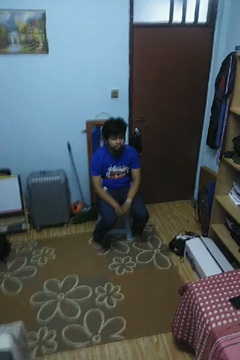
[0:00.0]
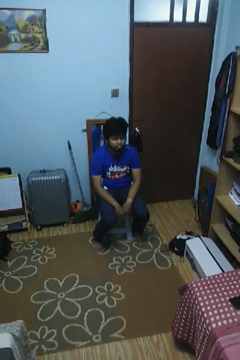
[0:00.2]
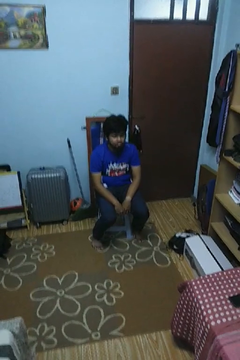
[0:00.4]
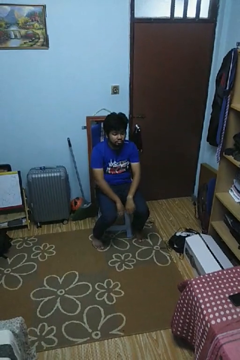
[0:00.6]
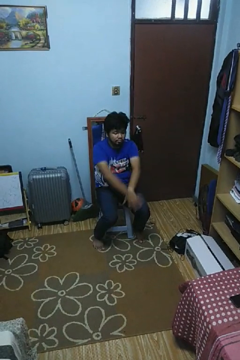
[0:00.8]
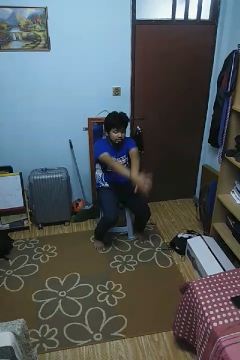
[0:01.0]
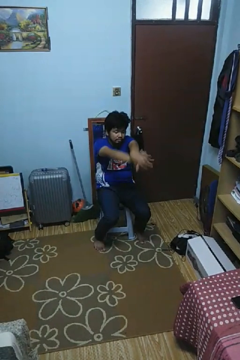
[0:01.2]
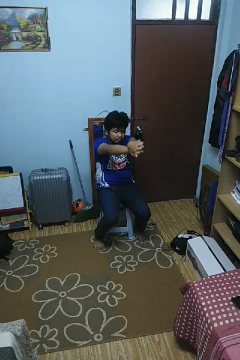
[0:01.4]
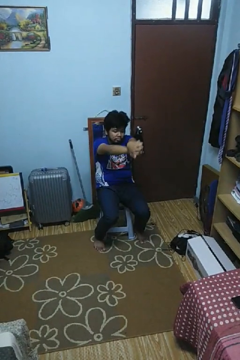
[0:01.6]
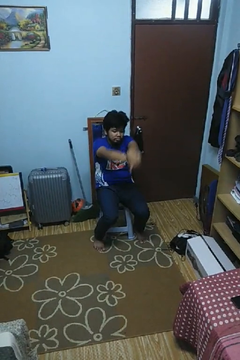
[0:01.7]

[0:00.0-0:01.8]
person crosses arms

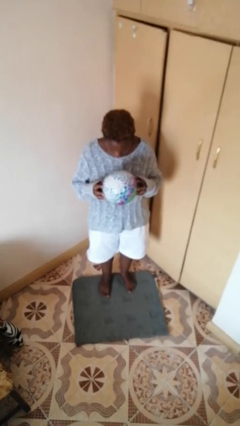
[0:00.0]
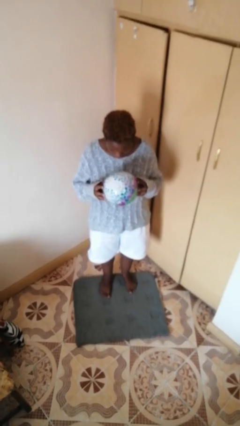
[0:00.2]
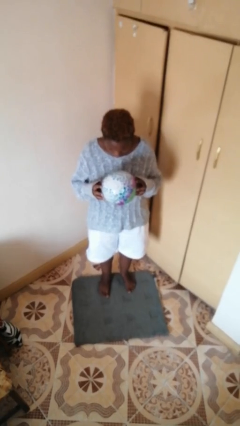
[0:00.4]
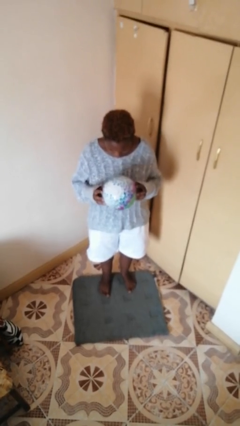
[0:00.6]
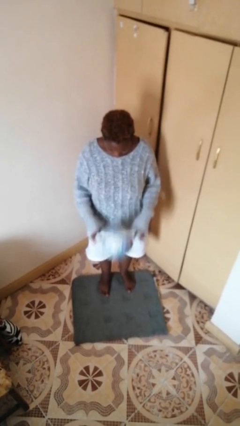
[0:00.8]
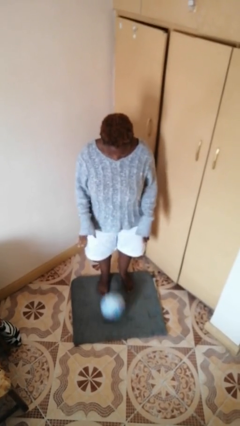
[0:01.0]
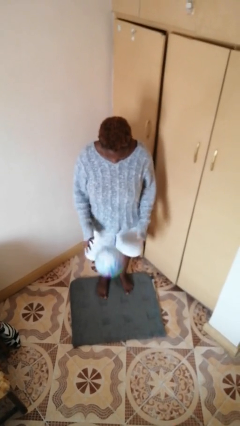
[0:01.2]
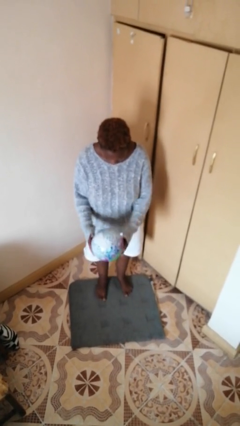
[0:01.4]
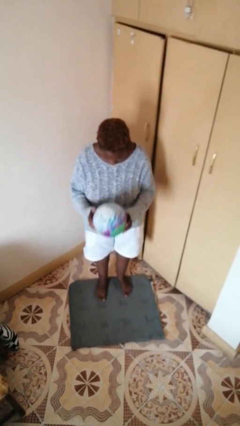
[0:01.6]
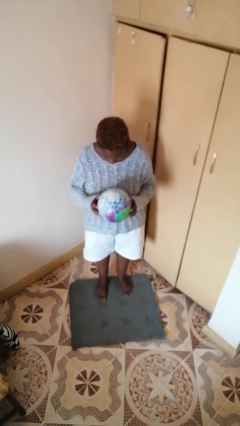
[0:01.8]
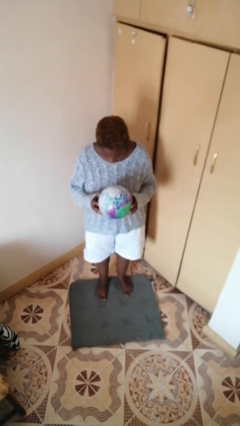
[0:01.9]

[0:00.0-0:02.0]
person bounces ball on floor

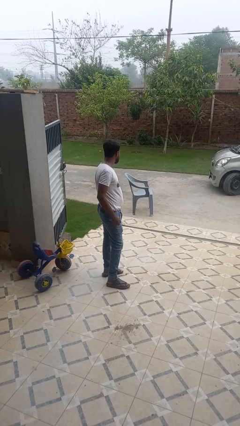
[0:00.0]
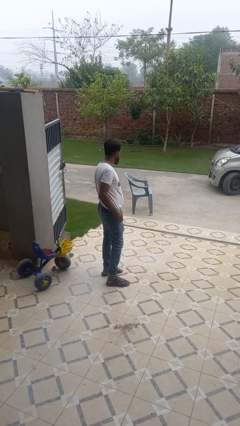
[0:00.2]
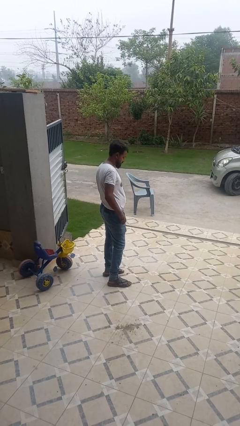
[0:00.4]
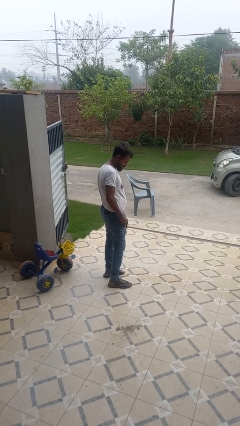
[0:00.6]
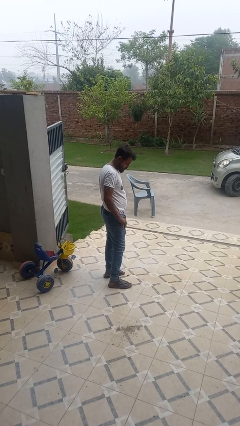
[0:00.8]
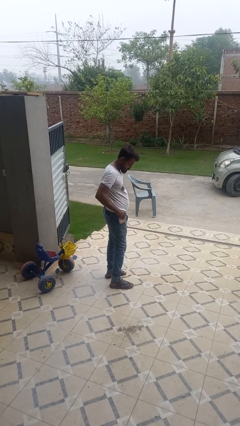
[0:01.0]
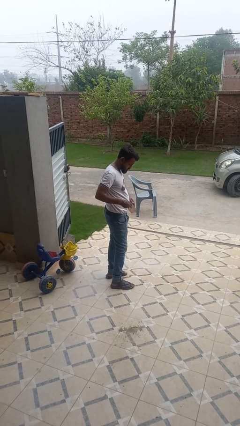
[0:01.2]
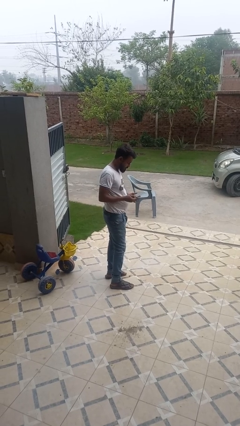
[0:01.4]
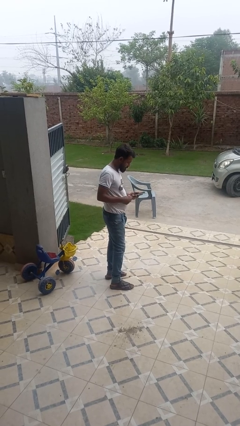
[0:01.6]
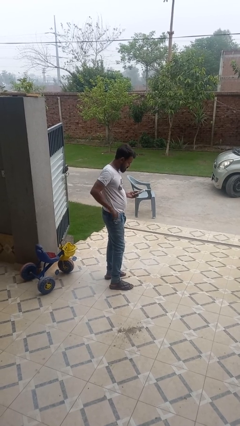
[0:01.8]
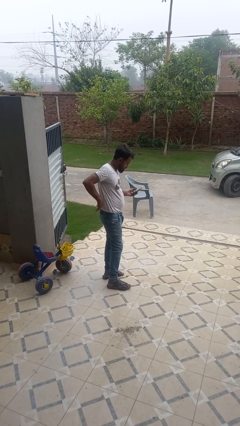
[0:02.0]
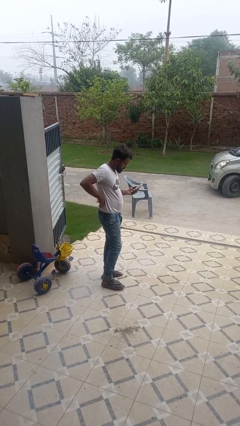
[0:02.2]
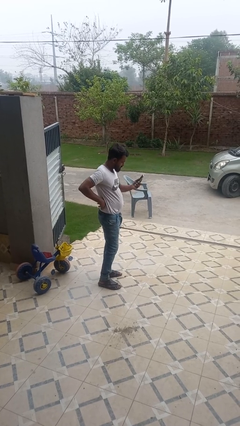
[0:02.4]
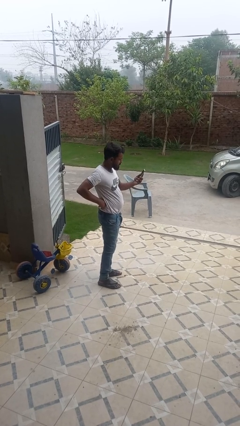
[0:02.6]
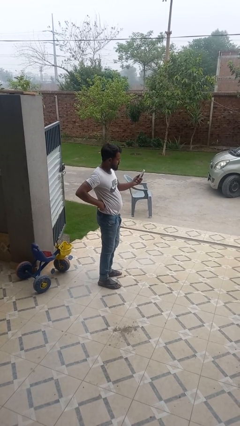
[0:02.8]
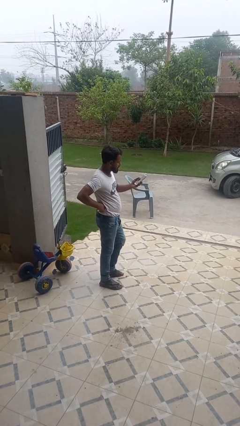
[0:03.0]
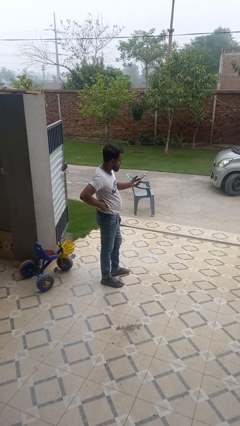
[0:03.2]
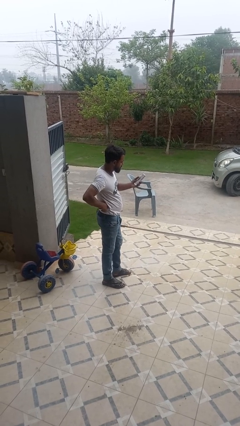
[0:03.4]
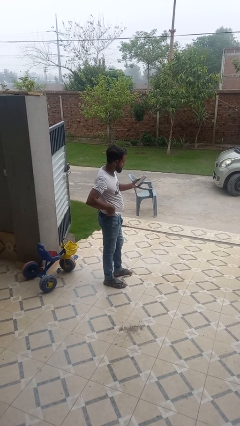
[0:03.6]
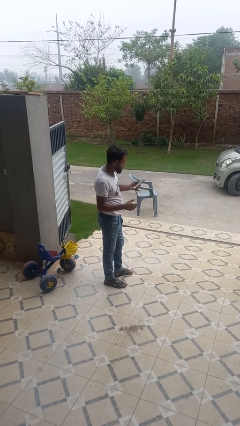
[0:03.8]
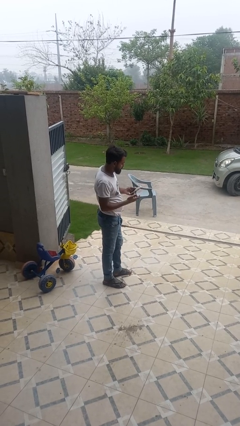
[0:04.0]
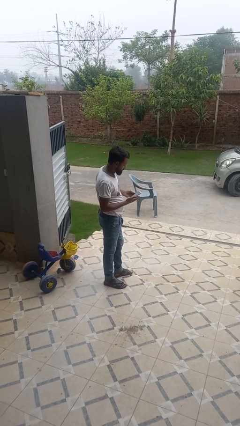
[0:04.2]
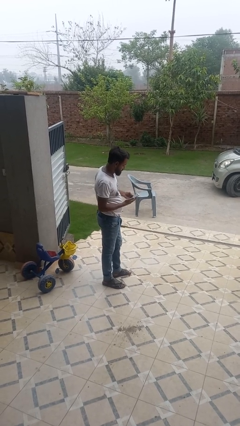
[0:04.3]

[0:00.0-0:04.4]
person takes phone from pocket

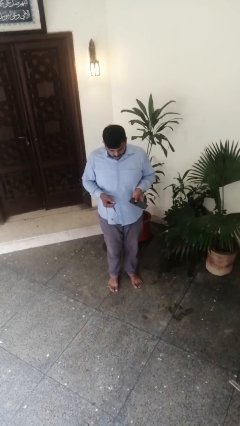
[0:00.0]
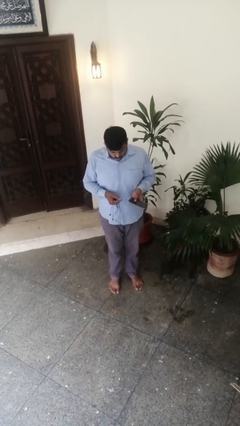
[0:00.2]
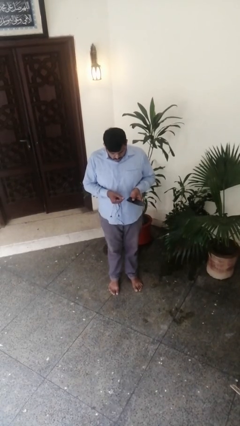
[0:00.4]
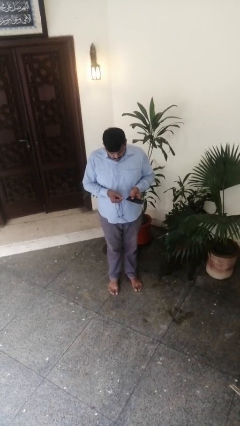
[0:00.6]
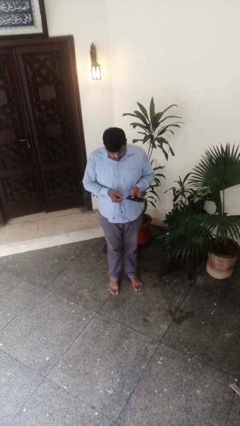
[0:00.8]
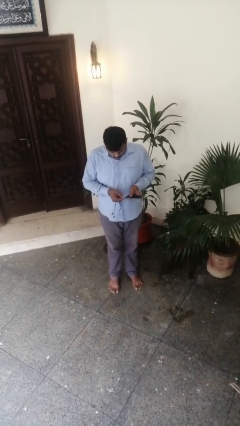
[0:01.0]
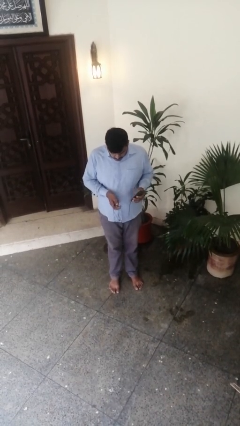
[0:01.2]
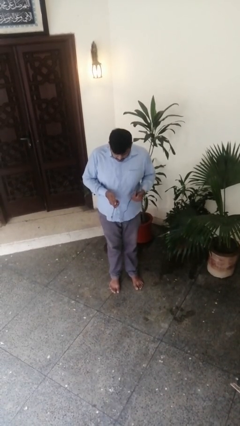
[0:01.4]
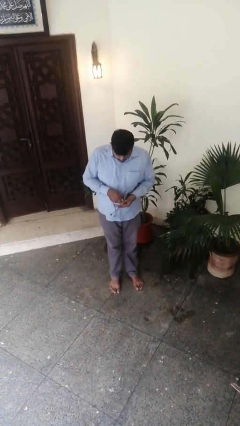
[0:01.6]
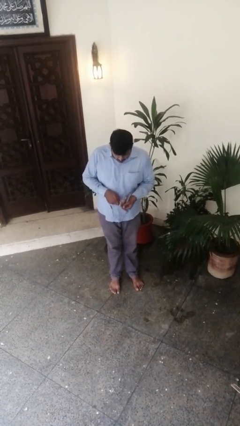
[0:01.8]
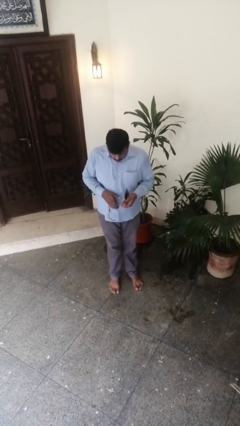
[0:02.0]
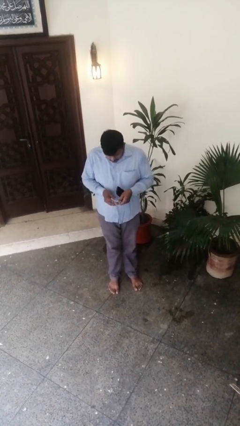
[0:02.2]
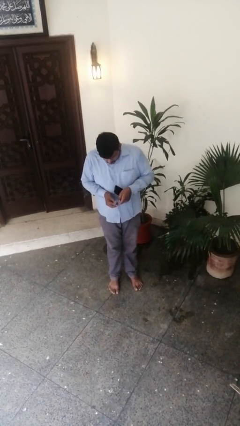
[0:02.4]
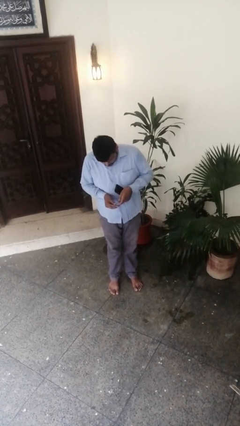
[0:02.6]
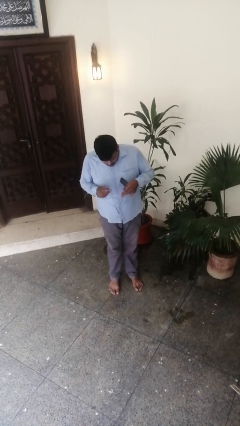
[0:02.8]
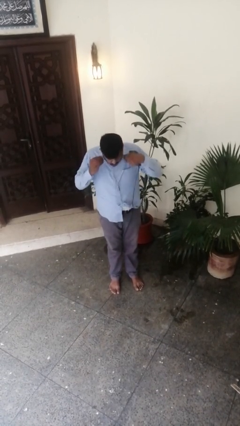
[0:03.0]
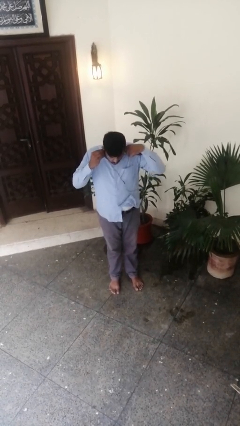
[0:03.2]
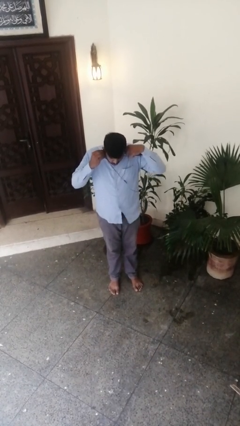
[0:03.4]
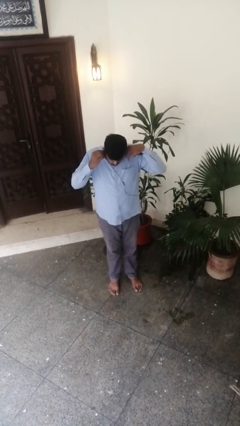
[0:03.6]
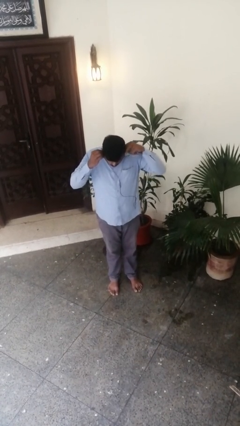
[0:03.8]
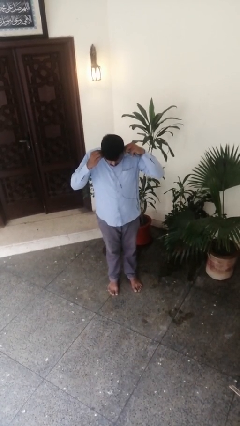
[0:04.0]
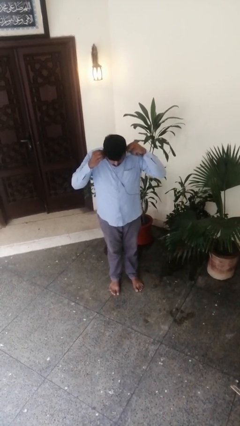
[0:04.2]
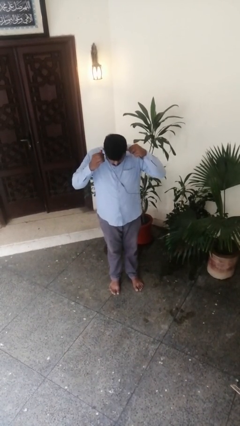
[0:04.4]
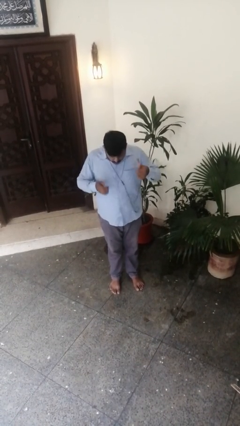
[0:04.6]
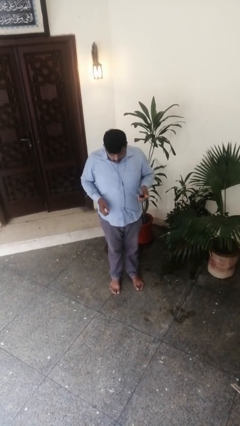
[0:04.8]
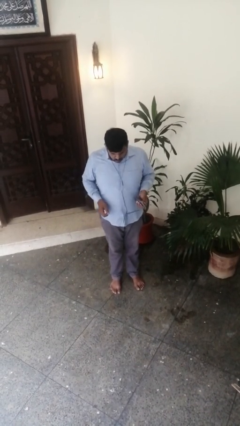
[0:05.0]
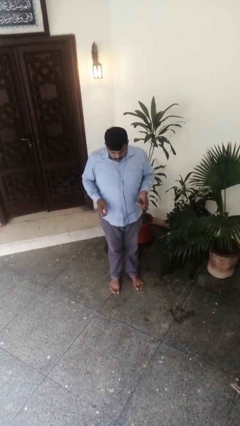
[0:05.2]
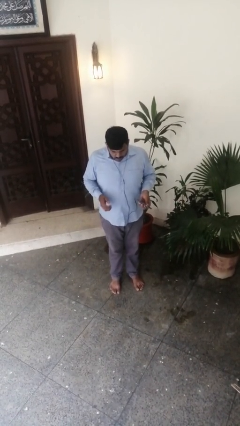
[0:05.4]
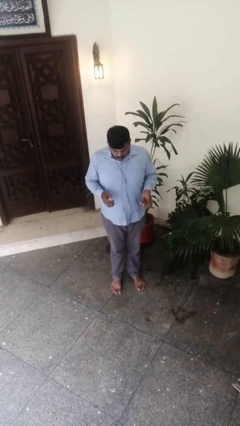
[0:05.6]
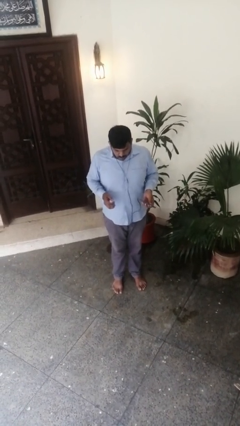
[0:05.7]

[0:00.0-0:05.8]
person puts on headphones

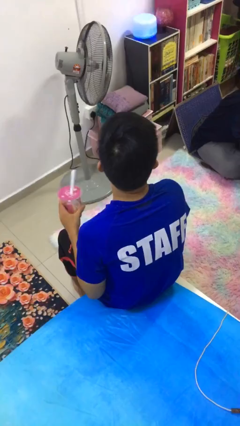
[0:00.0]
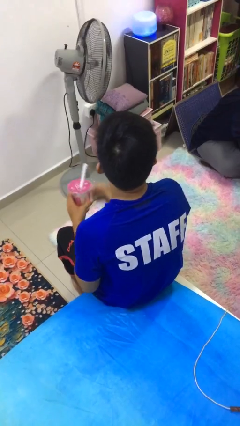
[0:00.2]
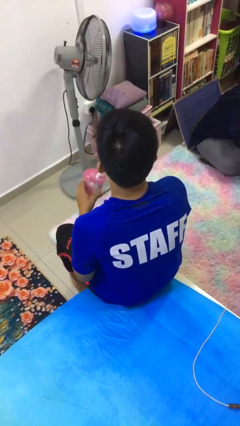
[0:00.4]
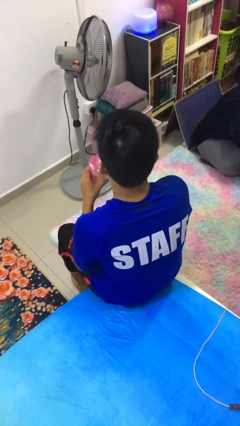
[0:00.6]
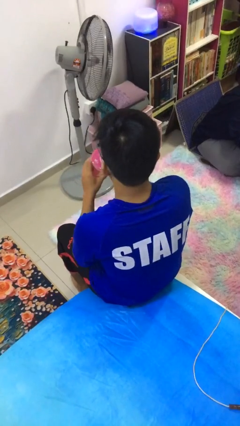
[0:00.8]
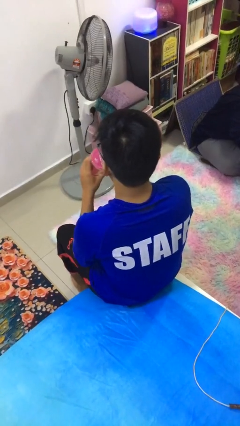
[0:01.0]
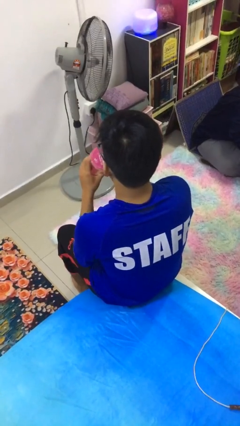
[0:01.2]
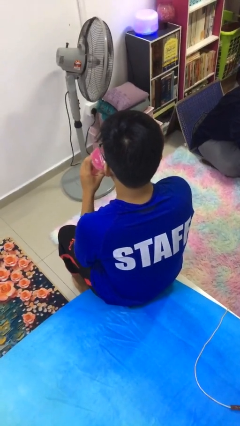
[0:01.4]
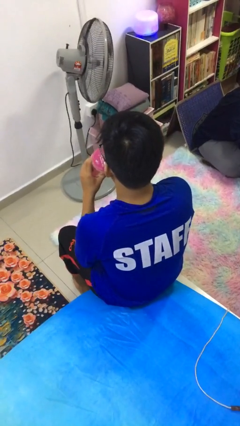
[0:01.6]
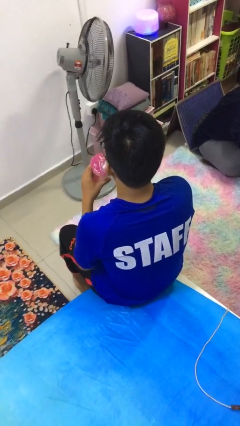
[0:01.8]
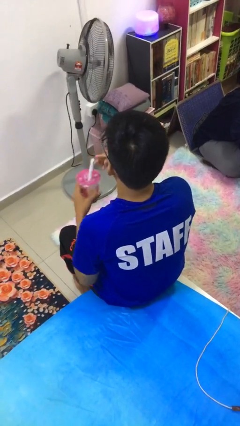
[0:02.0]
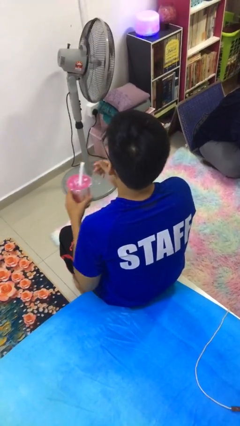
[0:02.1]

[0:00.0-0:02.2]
person drinks from straw

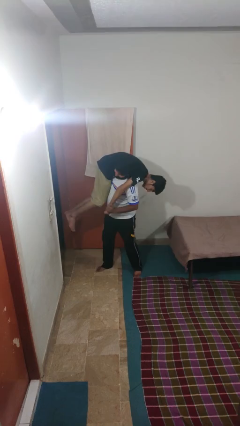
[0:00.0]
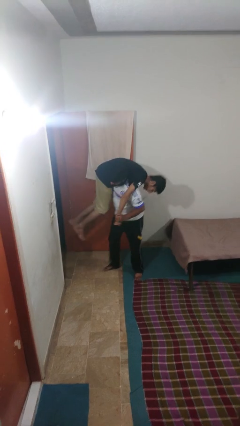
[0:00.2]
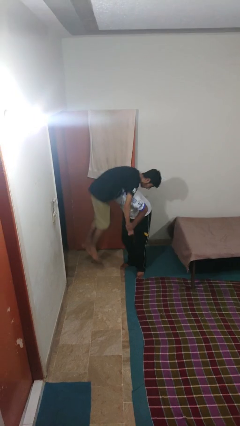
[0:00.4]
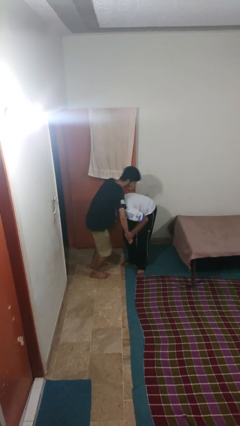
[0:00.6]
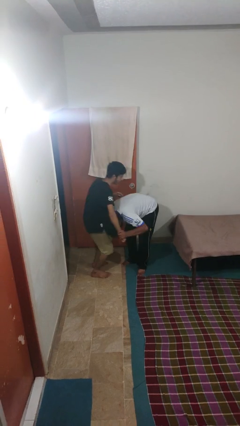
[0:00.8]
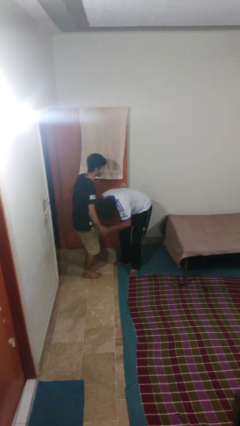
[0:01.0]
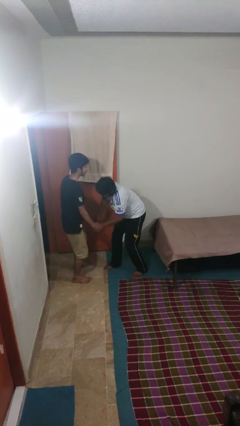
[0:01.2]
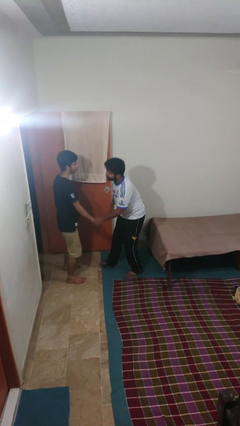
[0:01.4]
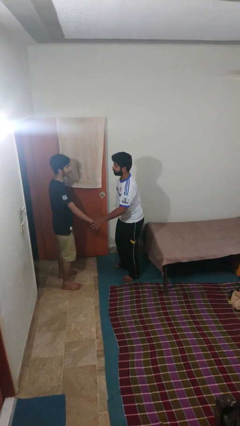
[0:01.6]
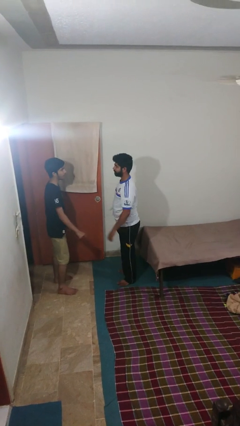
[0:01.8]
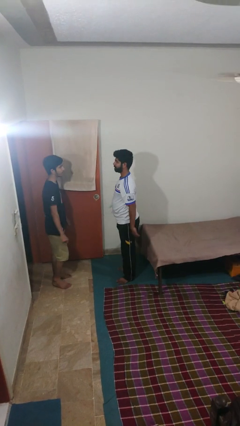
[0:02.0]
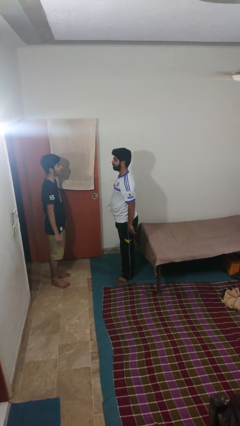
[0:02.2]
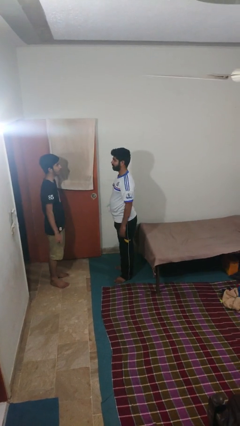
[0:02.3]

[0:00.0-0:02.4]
person puts down person
